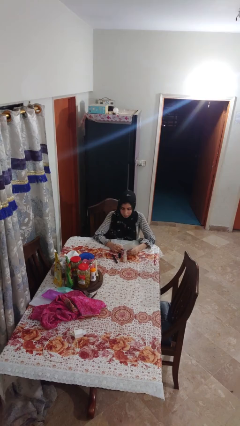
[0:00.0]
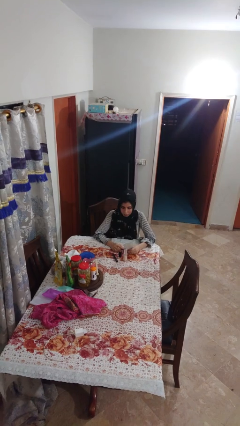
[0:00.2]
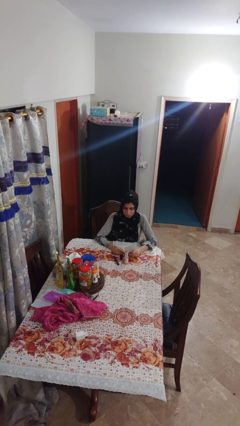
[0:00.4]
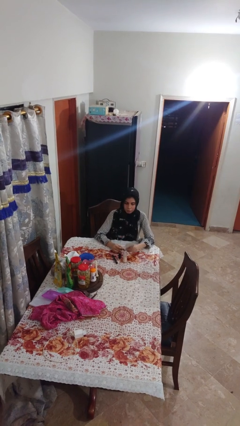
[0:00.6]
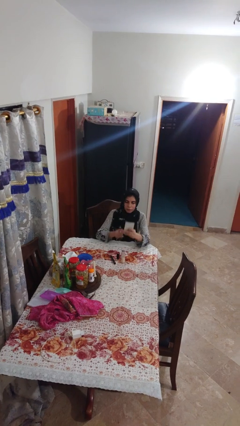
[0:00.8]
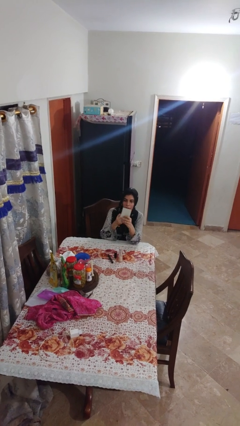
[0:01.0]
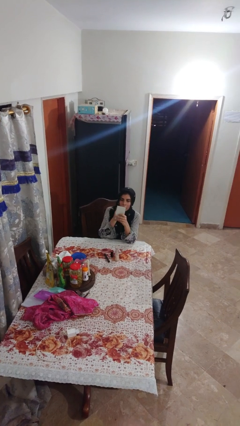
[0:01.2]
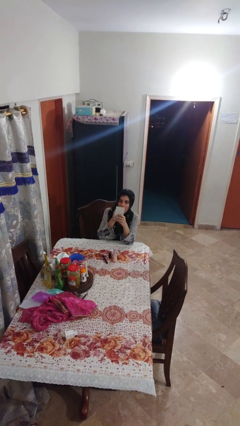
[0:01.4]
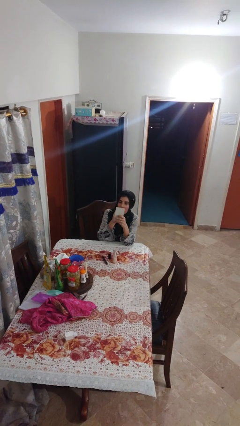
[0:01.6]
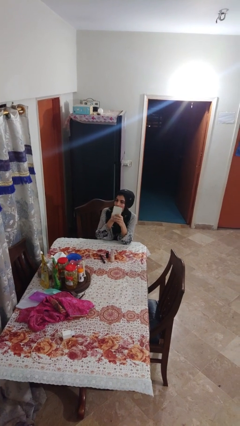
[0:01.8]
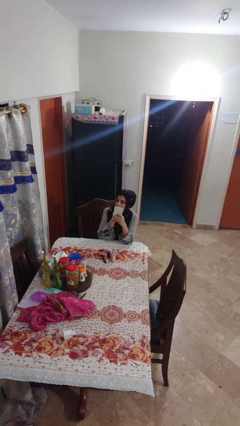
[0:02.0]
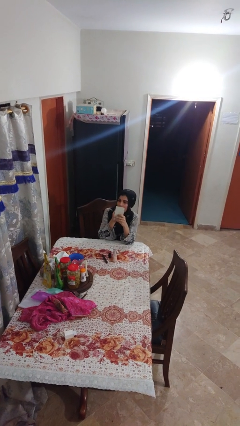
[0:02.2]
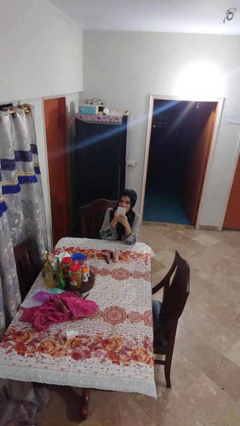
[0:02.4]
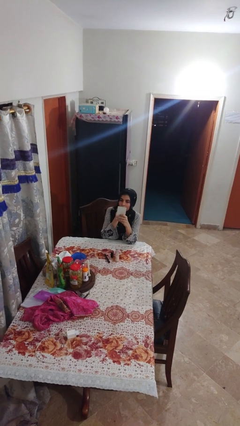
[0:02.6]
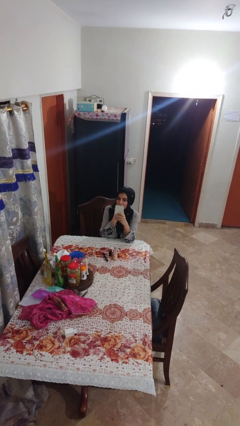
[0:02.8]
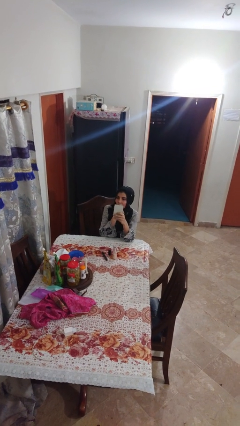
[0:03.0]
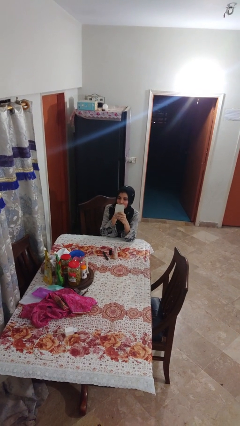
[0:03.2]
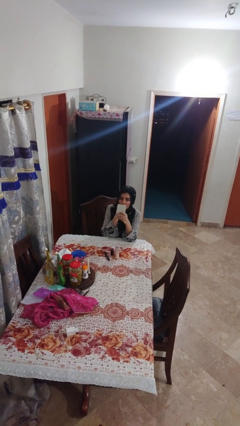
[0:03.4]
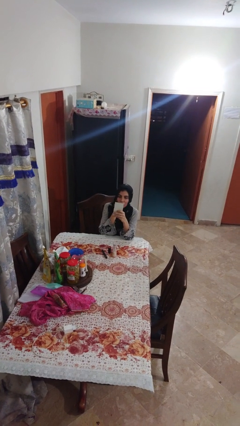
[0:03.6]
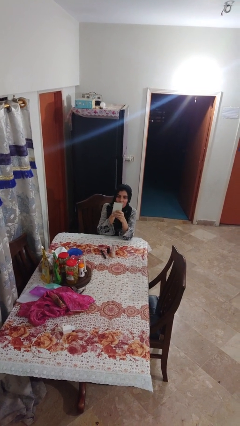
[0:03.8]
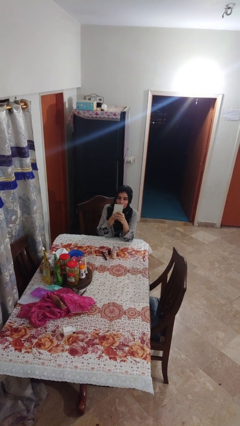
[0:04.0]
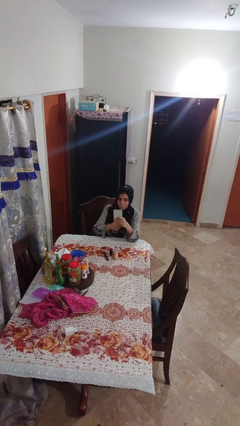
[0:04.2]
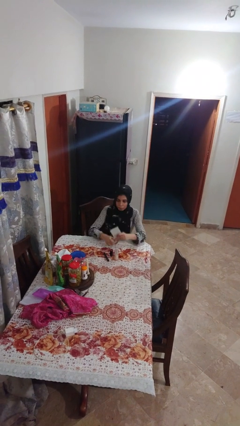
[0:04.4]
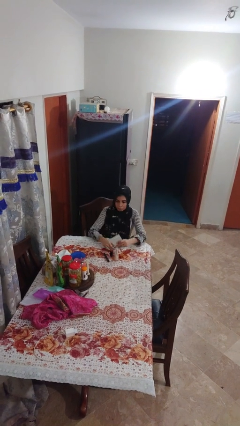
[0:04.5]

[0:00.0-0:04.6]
person applies lip makeup

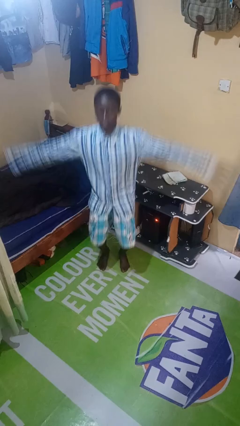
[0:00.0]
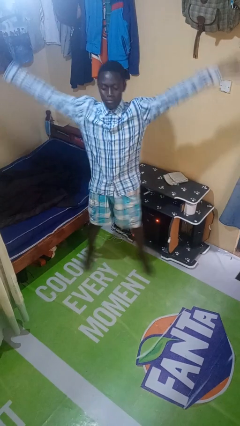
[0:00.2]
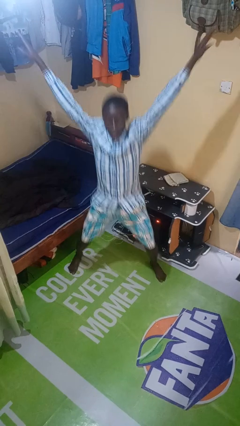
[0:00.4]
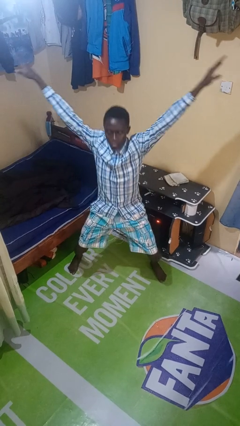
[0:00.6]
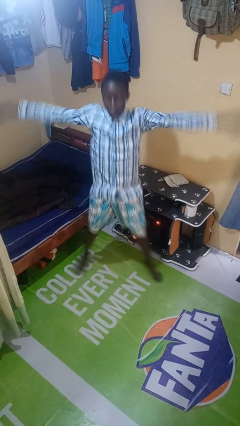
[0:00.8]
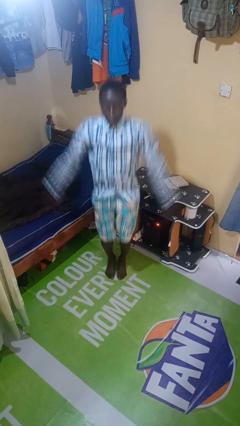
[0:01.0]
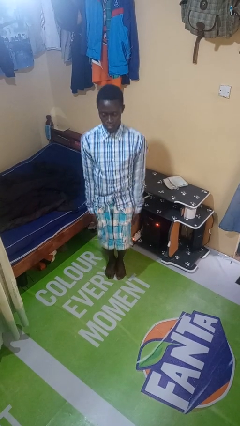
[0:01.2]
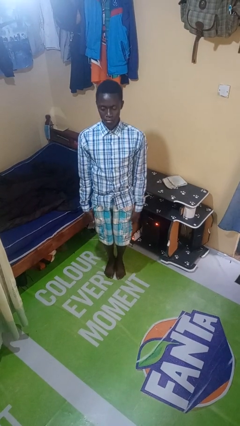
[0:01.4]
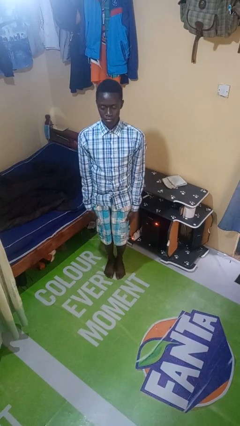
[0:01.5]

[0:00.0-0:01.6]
person exercises with jumping jacks

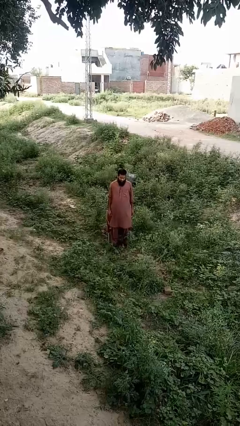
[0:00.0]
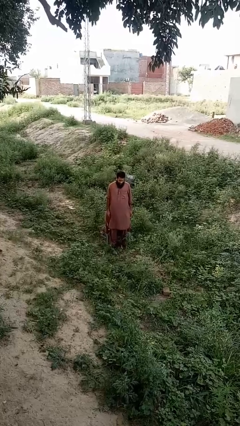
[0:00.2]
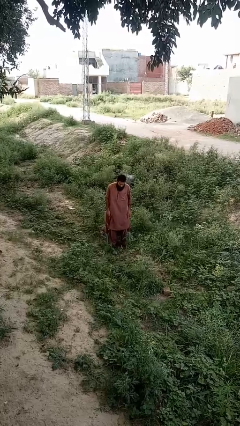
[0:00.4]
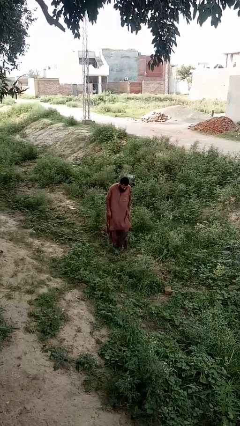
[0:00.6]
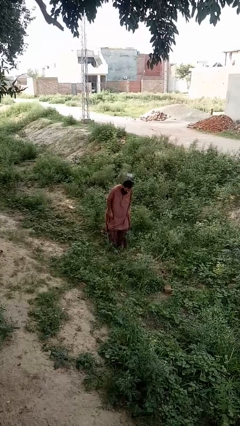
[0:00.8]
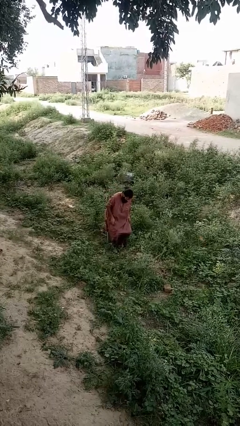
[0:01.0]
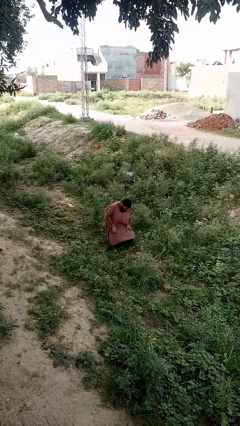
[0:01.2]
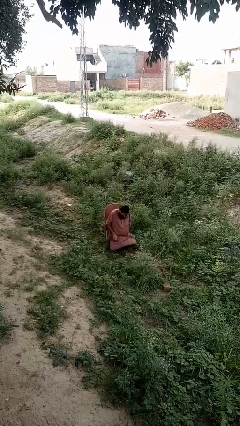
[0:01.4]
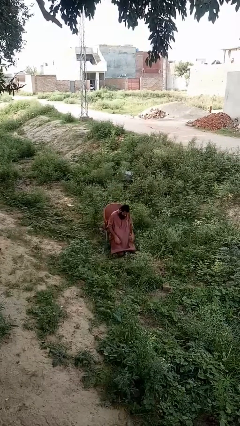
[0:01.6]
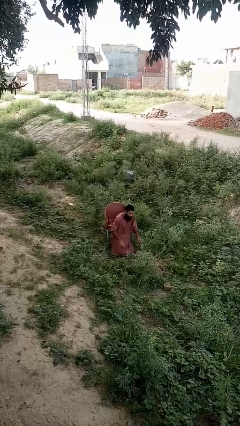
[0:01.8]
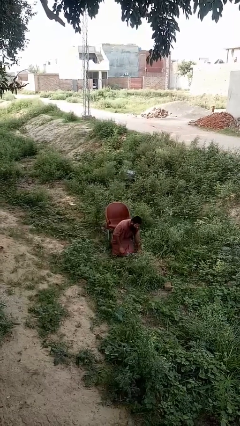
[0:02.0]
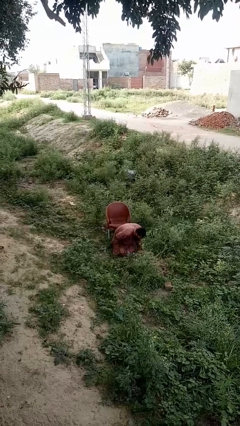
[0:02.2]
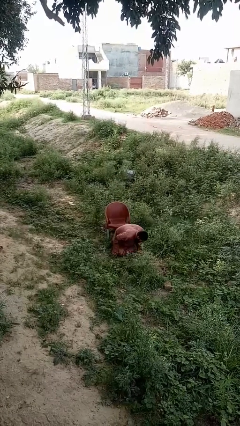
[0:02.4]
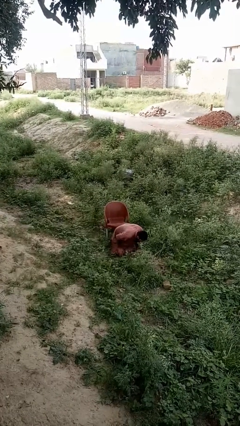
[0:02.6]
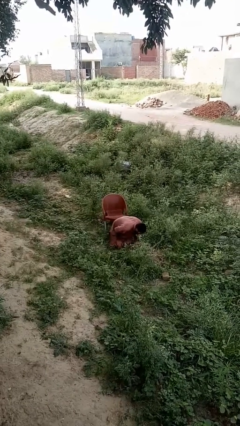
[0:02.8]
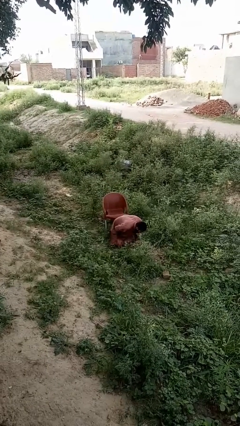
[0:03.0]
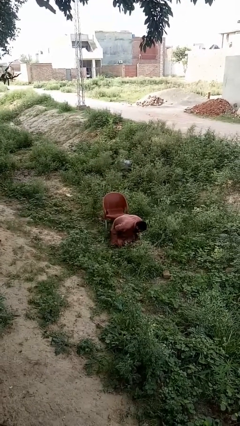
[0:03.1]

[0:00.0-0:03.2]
person falls from chair

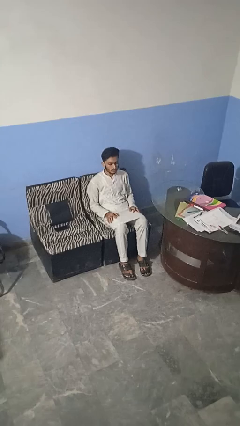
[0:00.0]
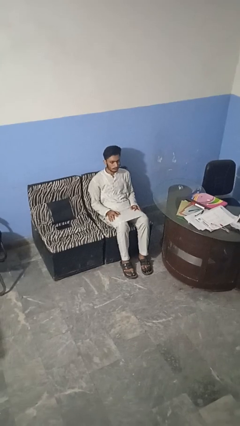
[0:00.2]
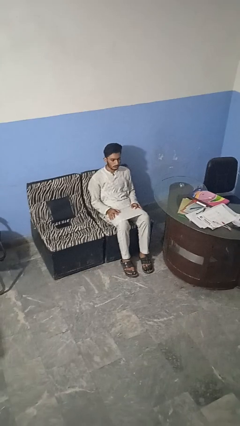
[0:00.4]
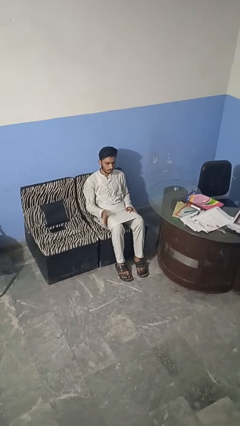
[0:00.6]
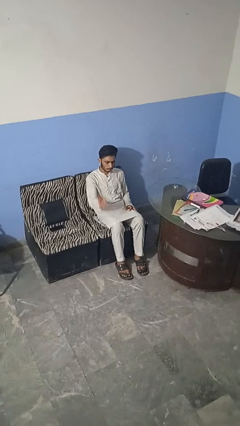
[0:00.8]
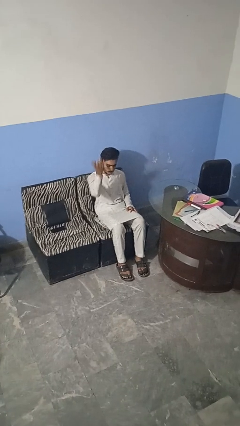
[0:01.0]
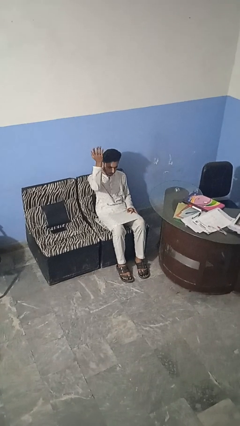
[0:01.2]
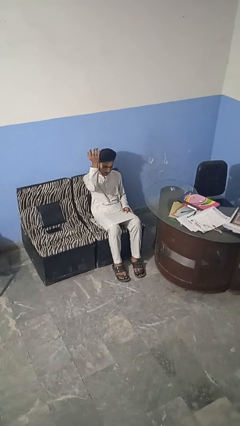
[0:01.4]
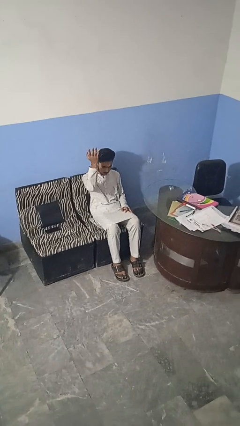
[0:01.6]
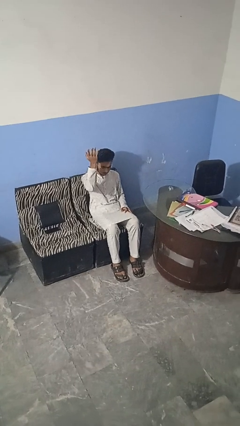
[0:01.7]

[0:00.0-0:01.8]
person gestures swipe up

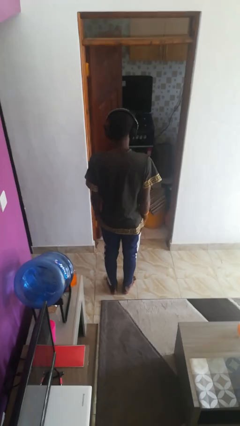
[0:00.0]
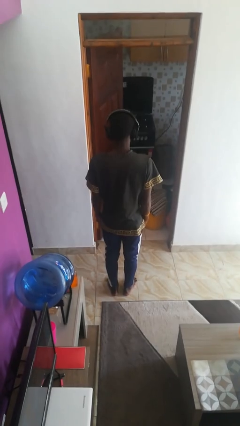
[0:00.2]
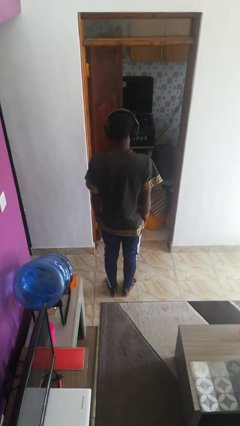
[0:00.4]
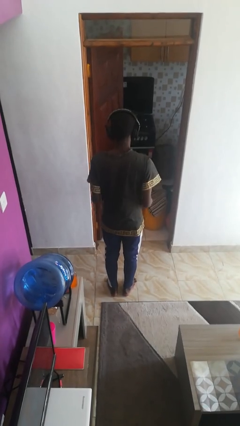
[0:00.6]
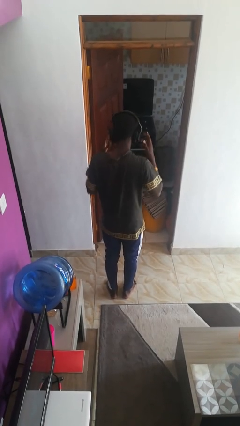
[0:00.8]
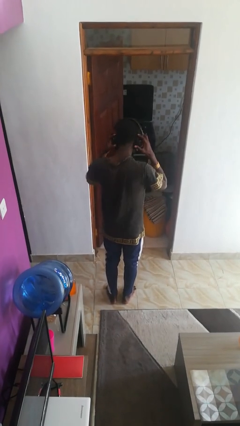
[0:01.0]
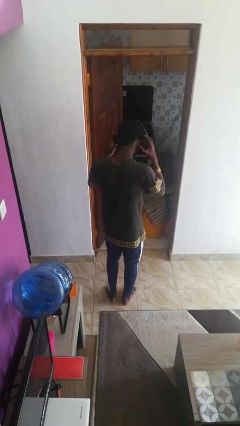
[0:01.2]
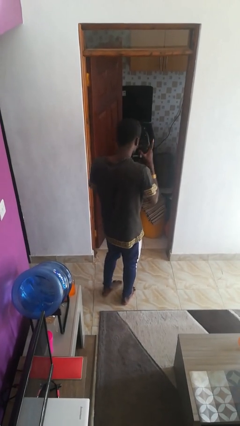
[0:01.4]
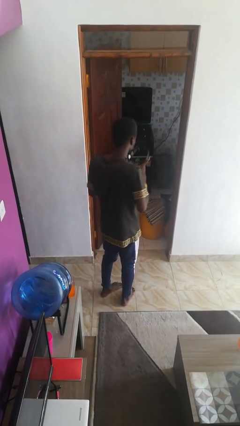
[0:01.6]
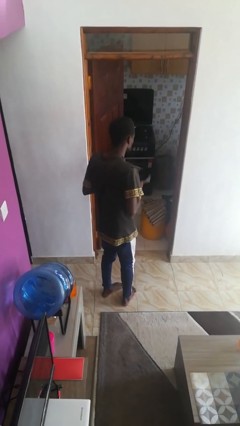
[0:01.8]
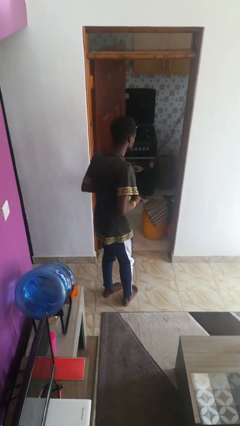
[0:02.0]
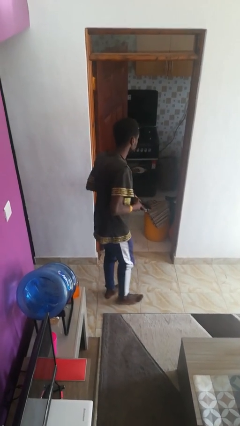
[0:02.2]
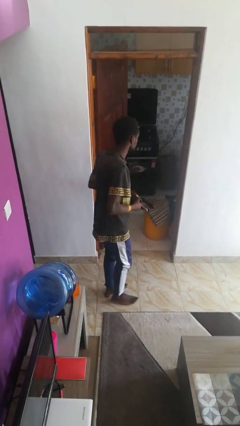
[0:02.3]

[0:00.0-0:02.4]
person takes off headphones

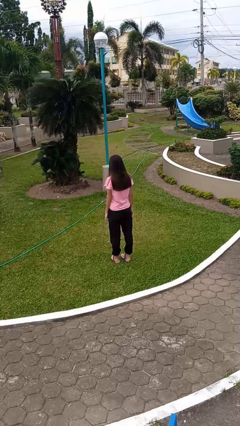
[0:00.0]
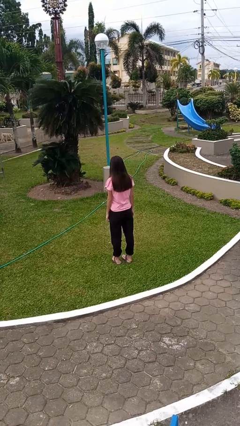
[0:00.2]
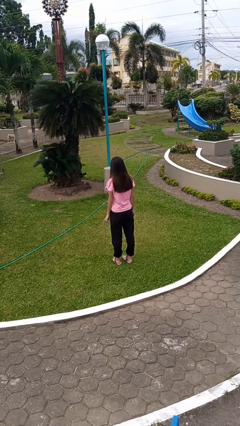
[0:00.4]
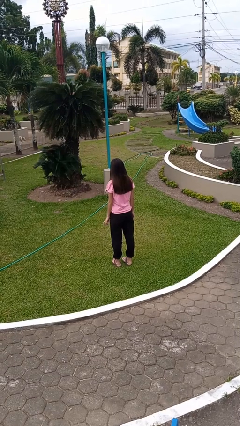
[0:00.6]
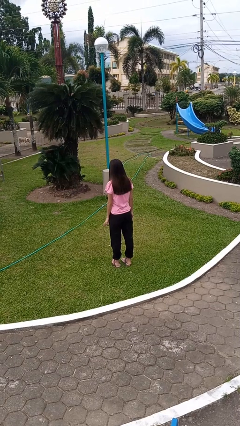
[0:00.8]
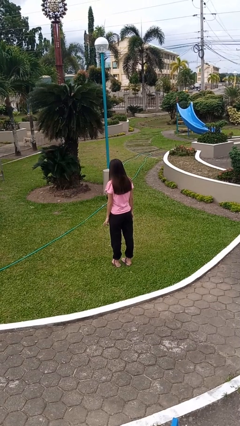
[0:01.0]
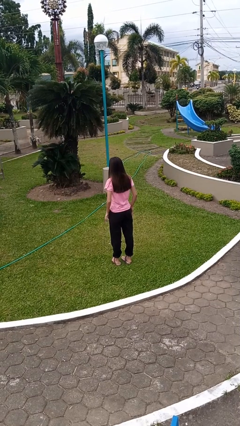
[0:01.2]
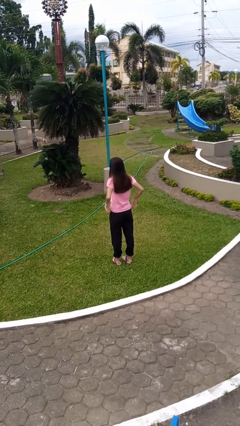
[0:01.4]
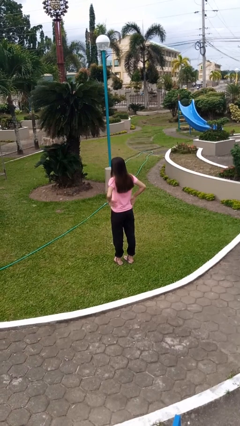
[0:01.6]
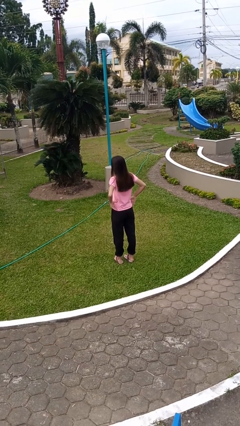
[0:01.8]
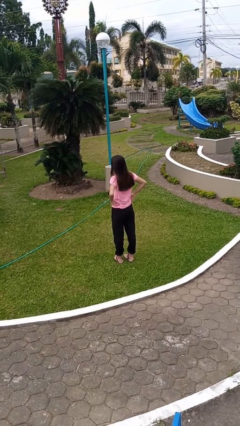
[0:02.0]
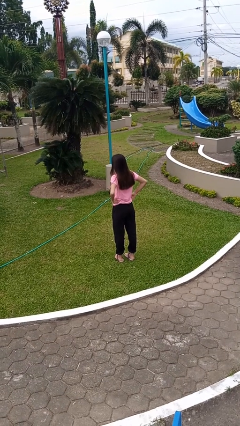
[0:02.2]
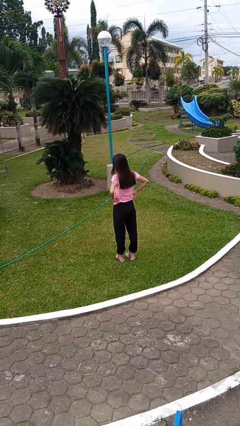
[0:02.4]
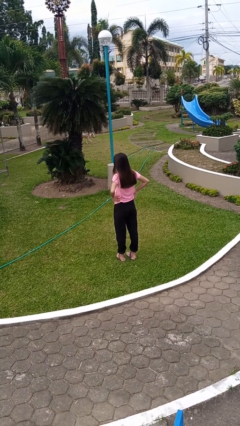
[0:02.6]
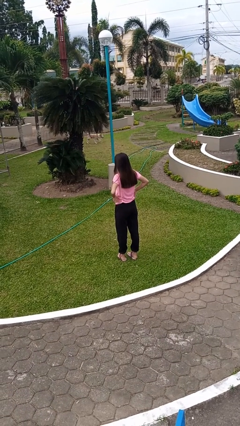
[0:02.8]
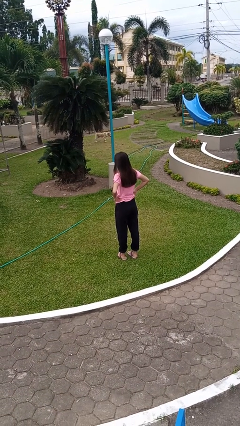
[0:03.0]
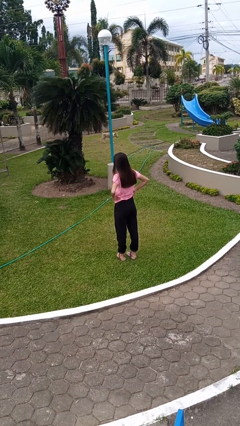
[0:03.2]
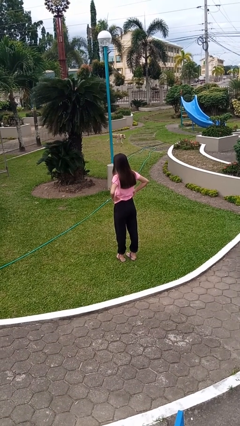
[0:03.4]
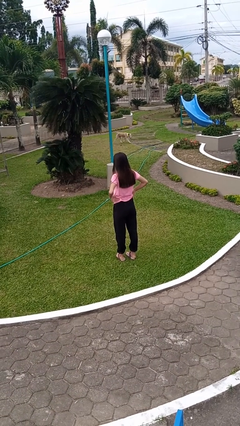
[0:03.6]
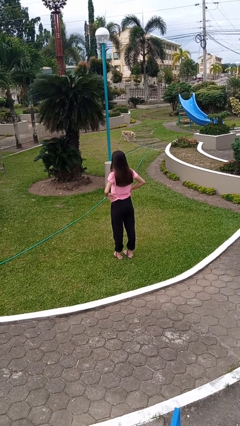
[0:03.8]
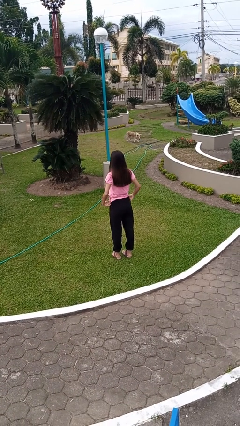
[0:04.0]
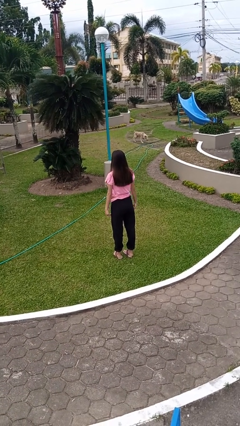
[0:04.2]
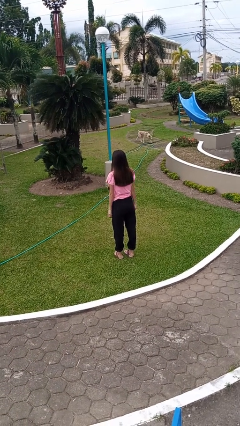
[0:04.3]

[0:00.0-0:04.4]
person hikes up pants
